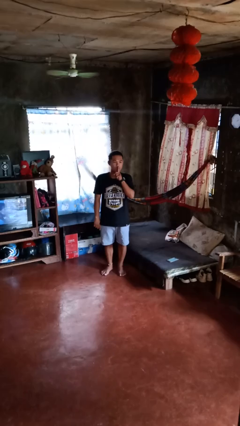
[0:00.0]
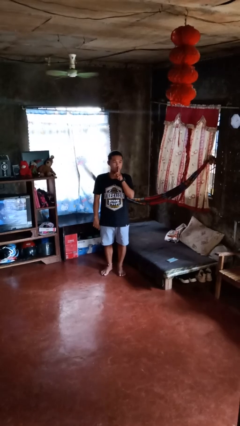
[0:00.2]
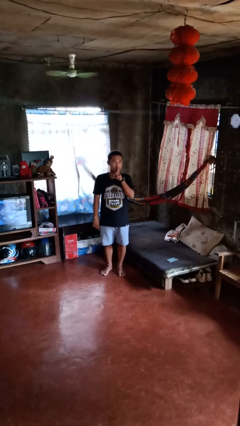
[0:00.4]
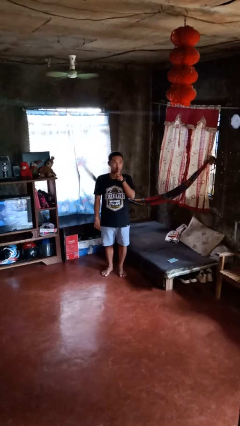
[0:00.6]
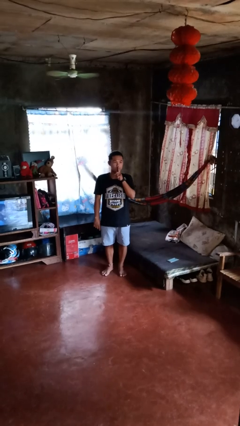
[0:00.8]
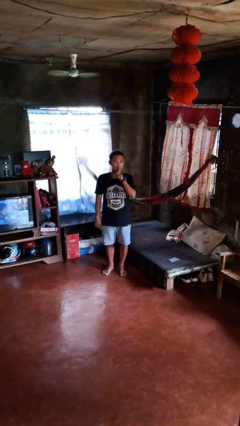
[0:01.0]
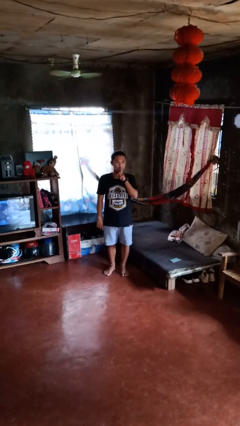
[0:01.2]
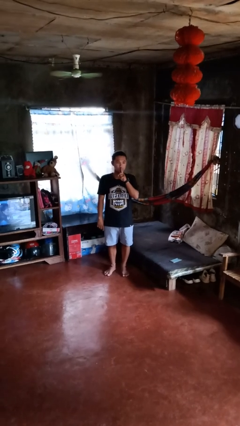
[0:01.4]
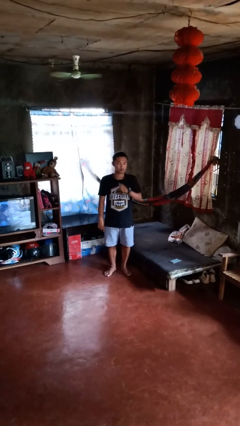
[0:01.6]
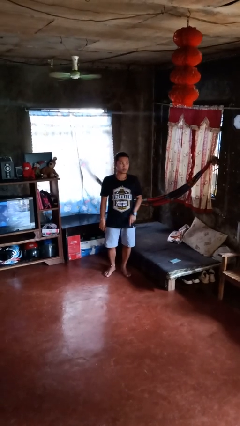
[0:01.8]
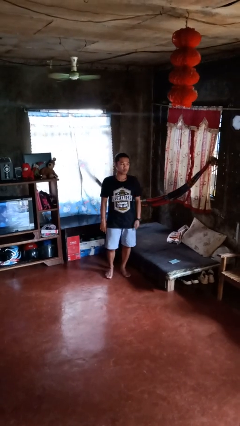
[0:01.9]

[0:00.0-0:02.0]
person gestures be quiet

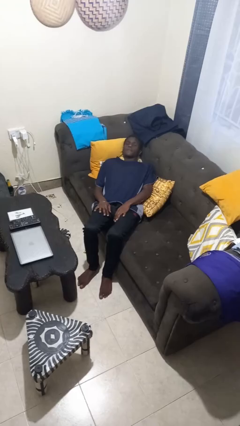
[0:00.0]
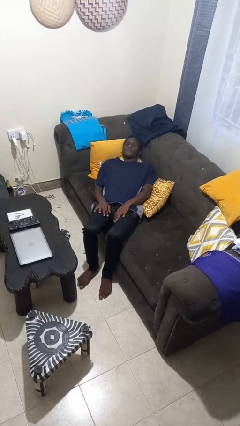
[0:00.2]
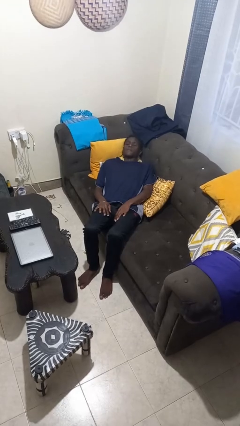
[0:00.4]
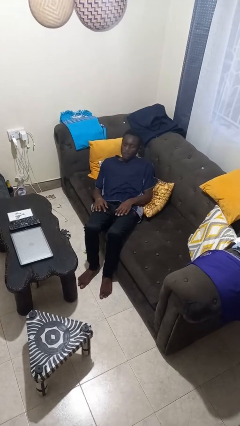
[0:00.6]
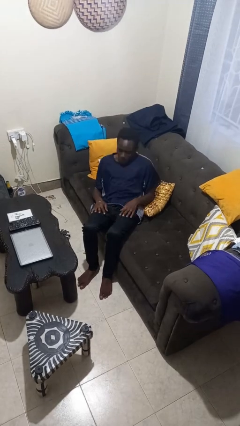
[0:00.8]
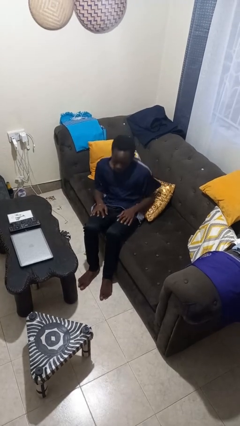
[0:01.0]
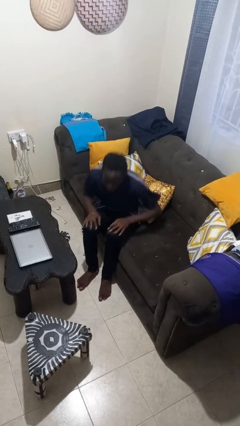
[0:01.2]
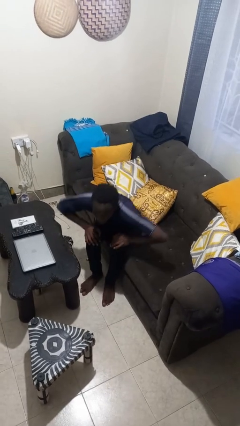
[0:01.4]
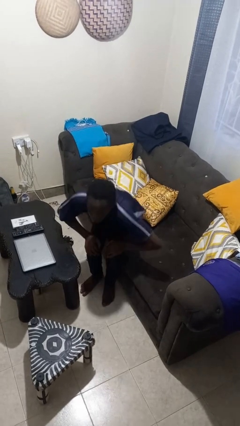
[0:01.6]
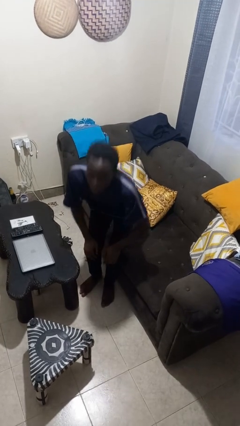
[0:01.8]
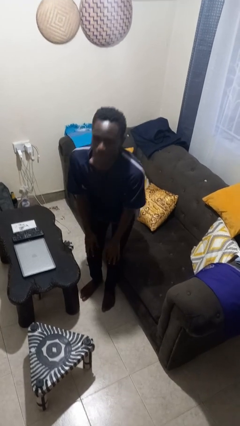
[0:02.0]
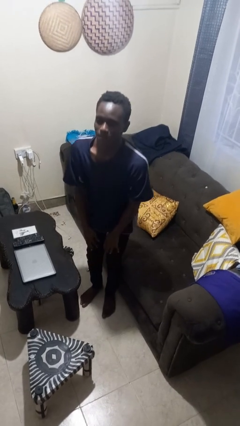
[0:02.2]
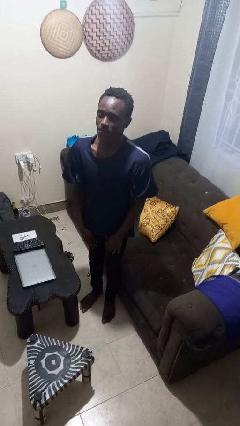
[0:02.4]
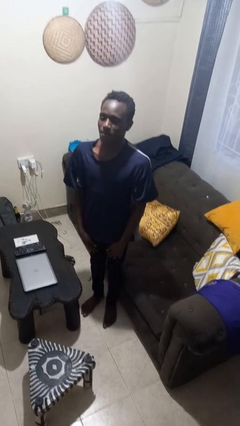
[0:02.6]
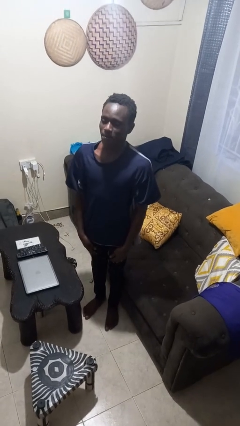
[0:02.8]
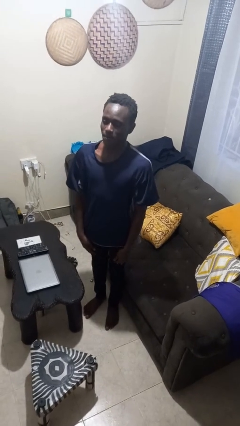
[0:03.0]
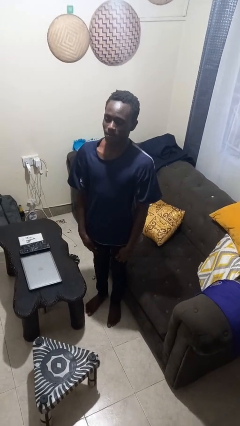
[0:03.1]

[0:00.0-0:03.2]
person stands up

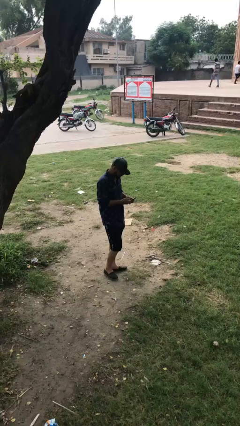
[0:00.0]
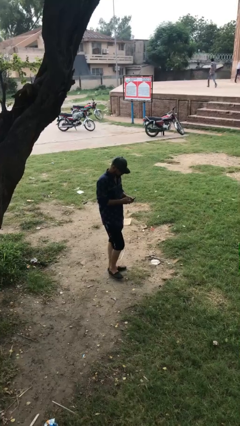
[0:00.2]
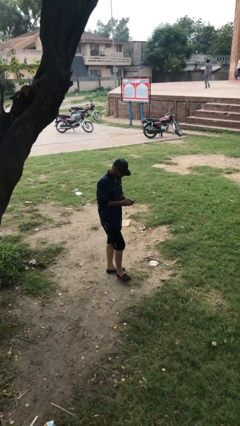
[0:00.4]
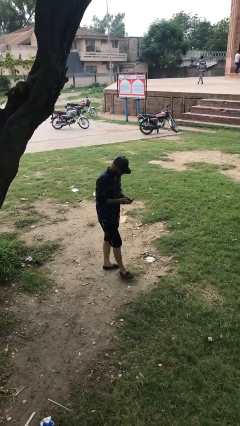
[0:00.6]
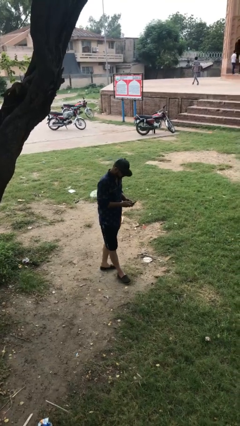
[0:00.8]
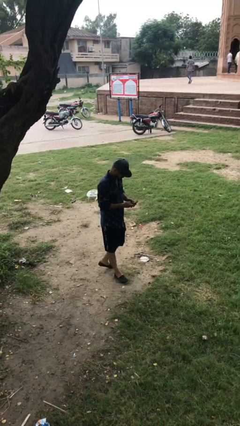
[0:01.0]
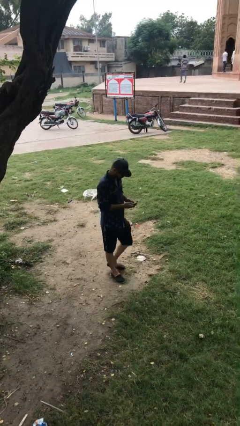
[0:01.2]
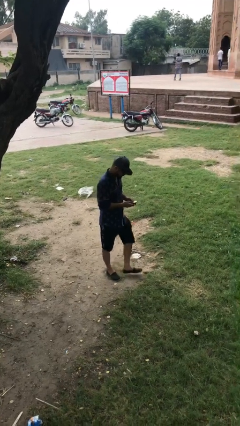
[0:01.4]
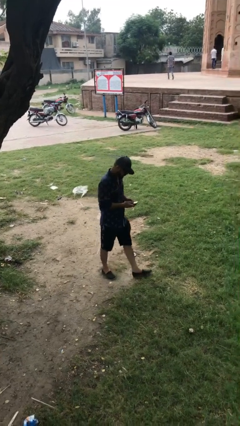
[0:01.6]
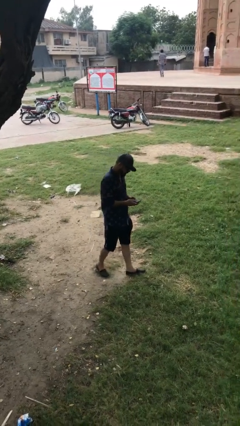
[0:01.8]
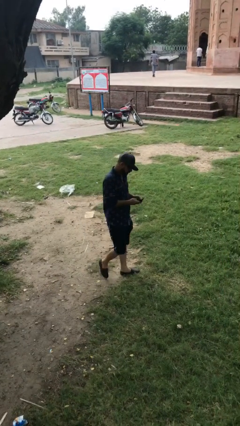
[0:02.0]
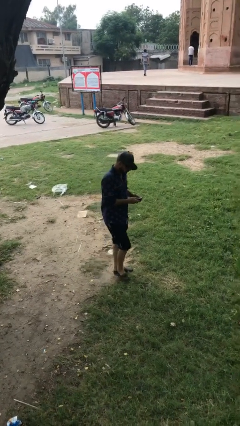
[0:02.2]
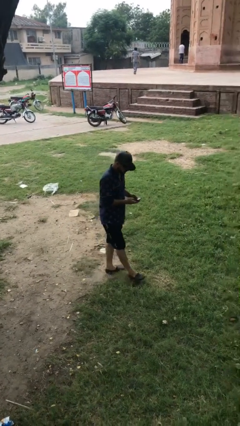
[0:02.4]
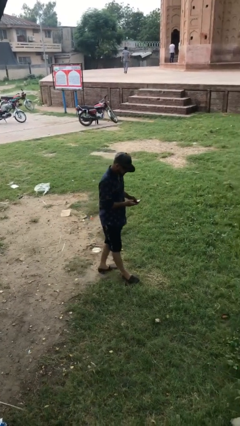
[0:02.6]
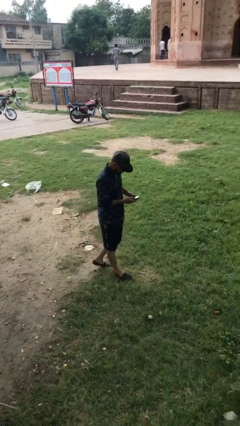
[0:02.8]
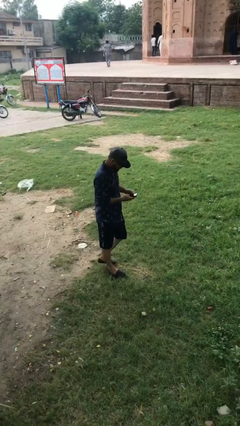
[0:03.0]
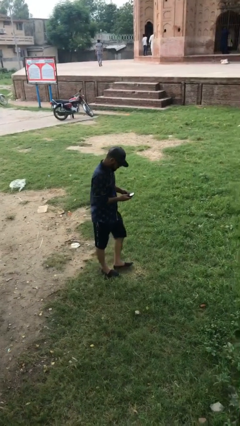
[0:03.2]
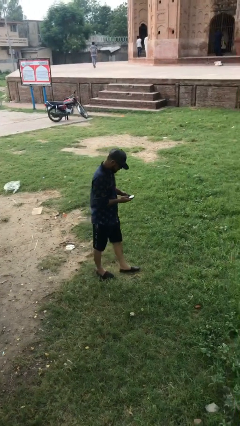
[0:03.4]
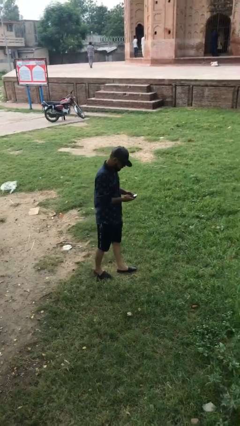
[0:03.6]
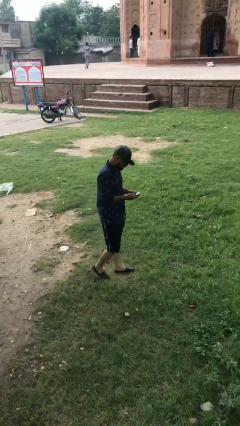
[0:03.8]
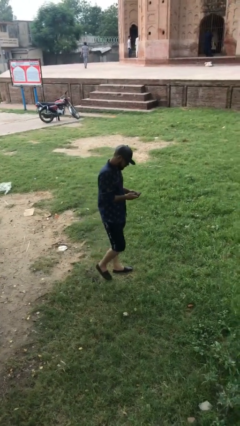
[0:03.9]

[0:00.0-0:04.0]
person texts on phone

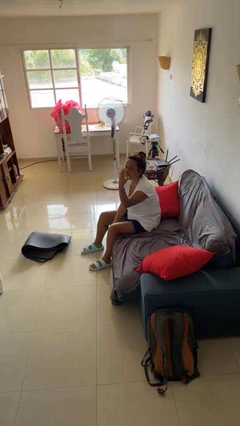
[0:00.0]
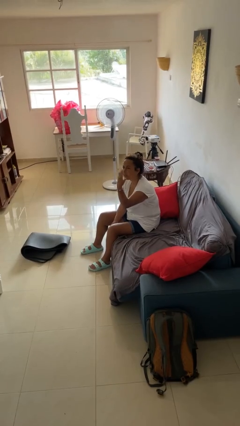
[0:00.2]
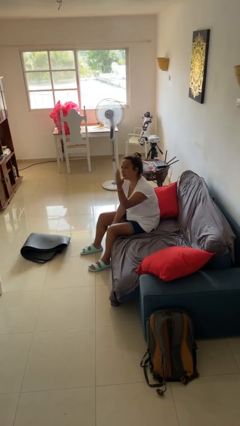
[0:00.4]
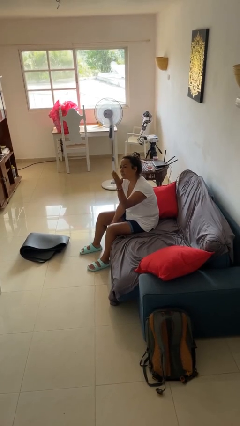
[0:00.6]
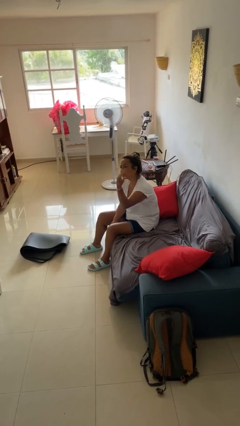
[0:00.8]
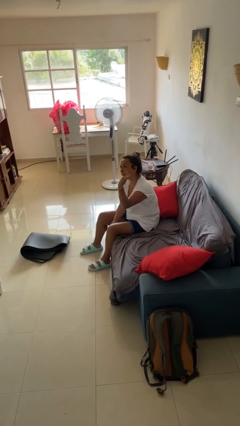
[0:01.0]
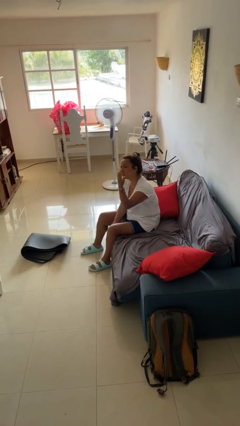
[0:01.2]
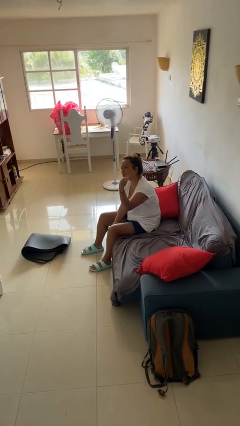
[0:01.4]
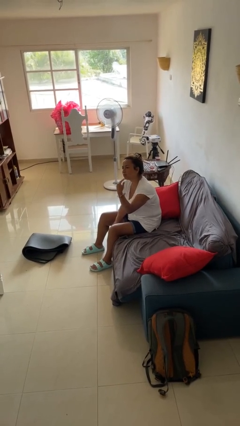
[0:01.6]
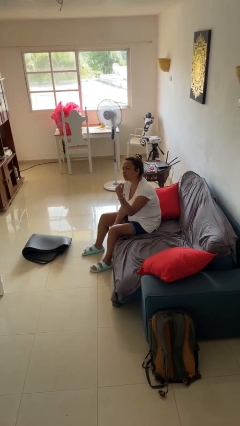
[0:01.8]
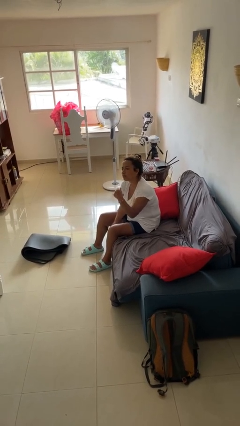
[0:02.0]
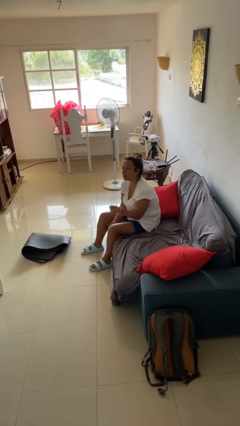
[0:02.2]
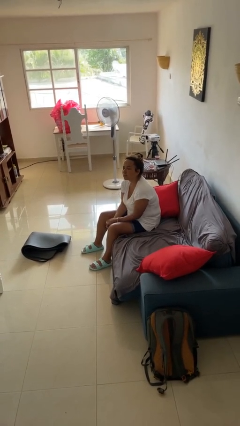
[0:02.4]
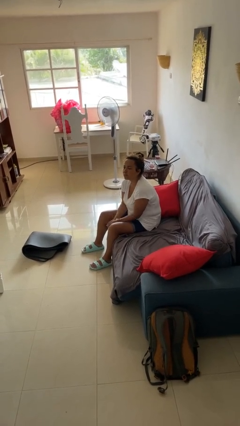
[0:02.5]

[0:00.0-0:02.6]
person gestures come here

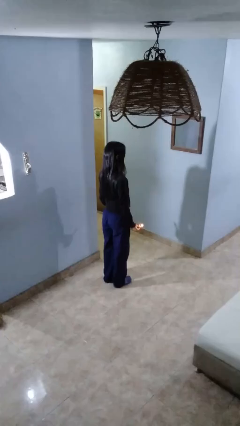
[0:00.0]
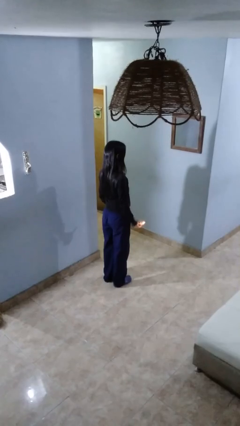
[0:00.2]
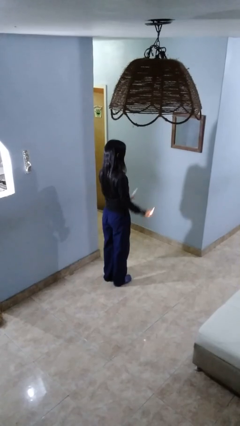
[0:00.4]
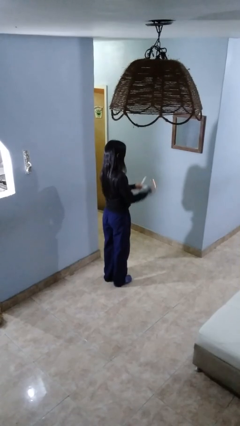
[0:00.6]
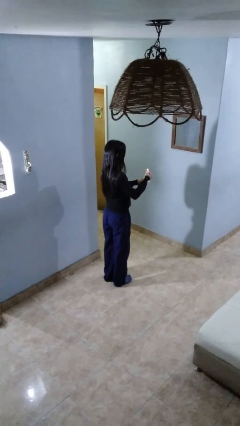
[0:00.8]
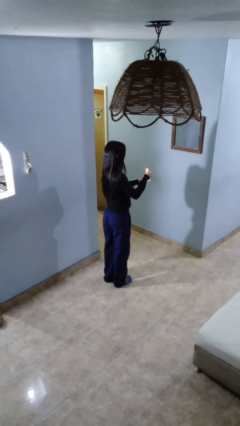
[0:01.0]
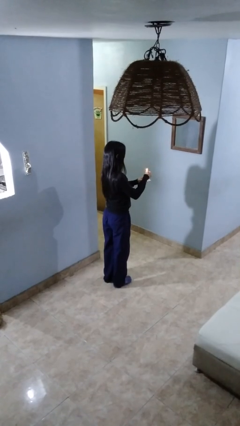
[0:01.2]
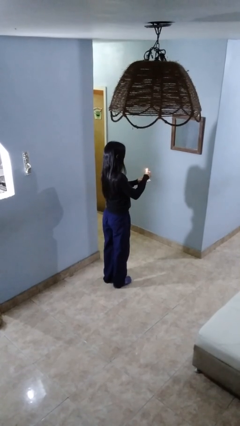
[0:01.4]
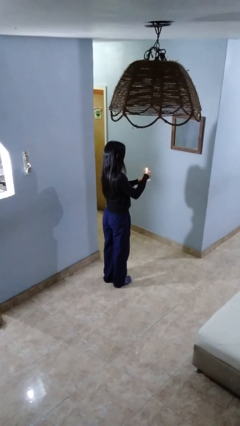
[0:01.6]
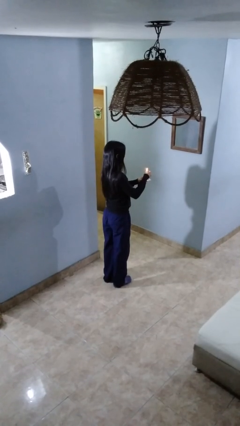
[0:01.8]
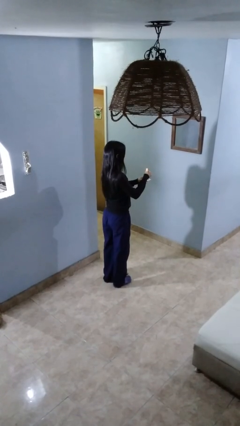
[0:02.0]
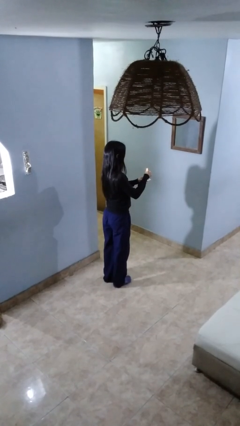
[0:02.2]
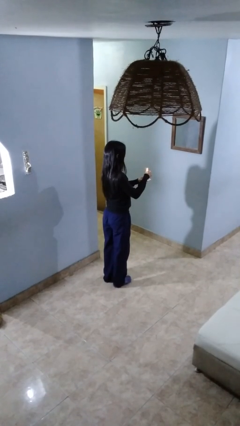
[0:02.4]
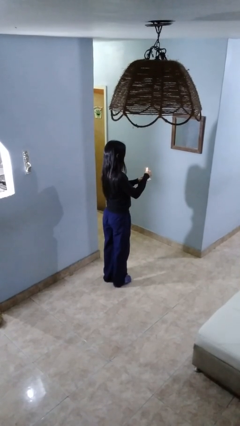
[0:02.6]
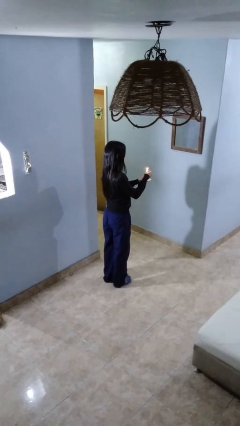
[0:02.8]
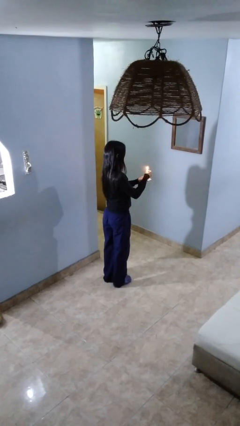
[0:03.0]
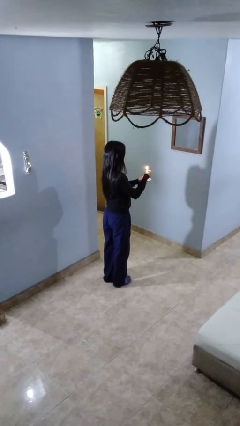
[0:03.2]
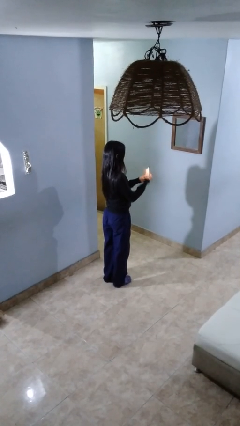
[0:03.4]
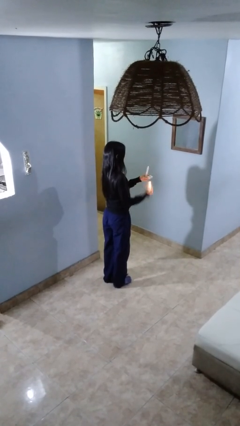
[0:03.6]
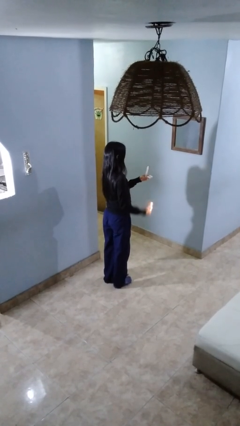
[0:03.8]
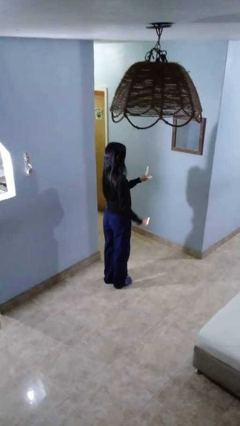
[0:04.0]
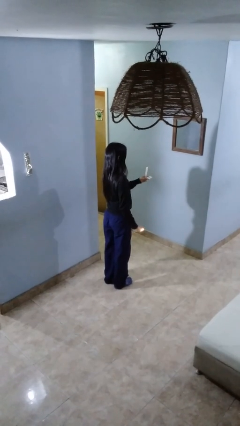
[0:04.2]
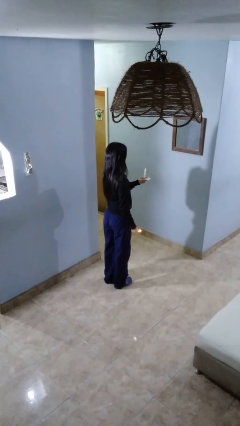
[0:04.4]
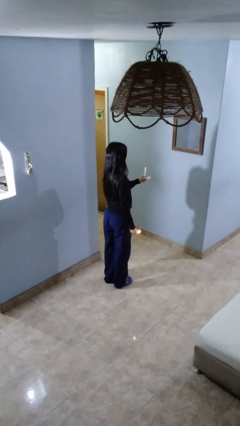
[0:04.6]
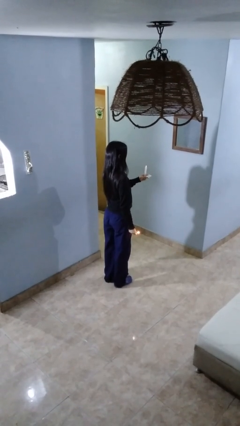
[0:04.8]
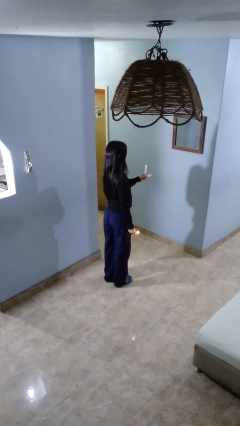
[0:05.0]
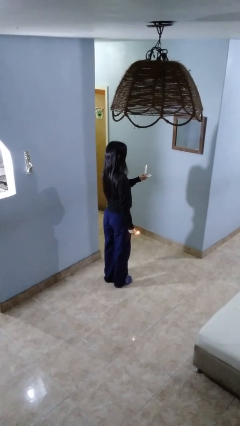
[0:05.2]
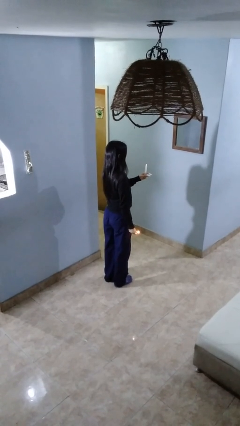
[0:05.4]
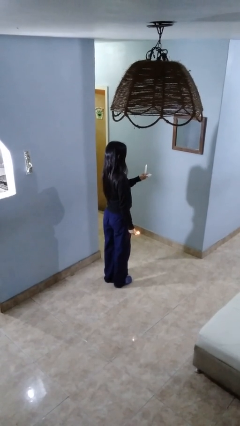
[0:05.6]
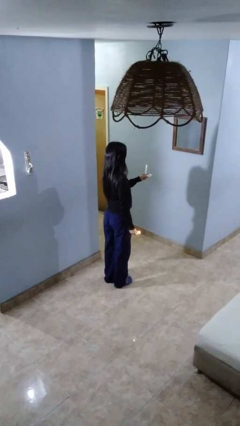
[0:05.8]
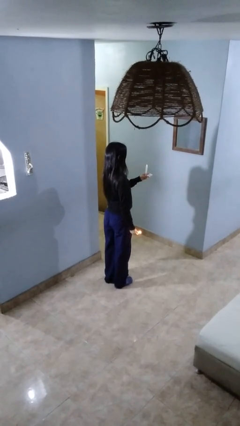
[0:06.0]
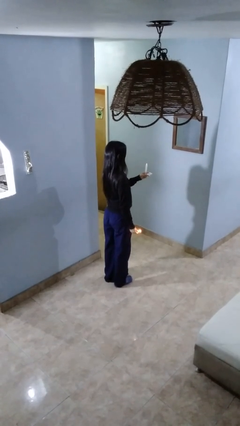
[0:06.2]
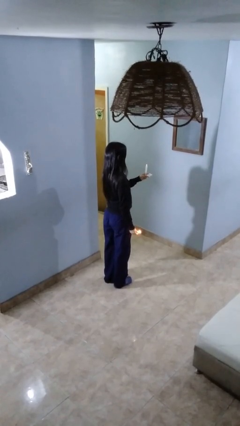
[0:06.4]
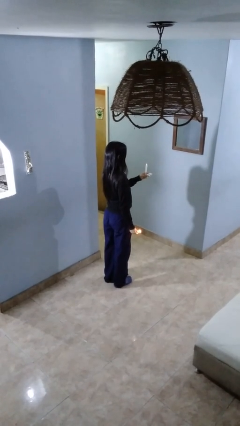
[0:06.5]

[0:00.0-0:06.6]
person lights candle
